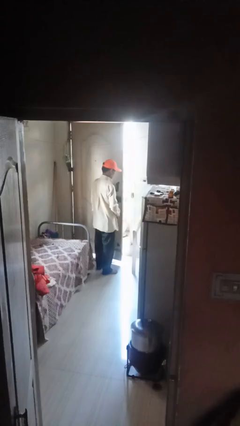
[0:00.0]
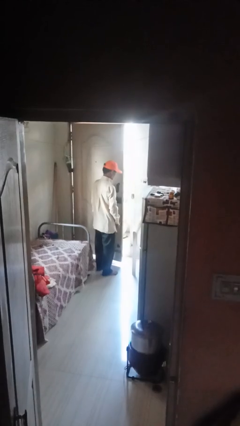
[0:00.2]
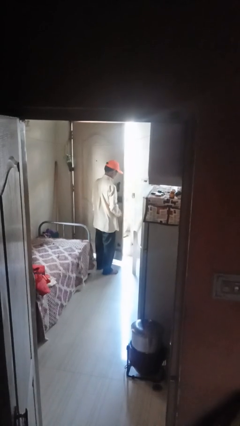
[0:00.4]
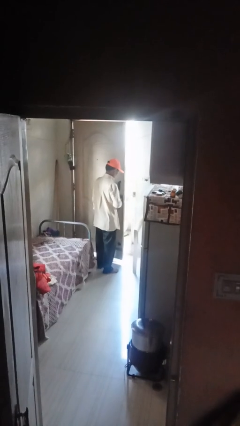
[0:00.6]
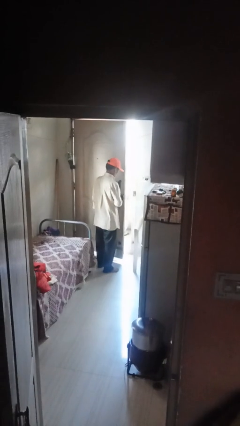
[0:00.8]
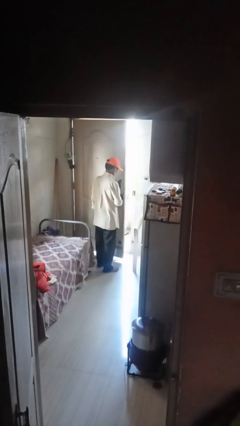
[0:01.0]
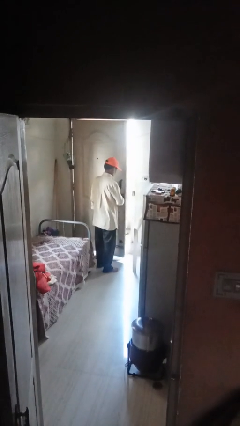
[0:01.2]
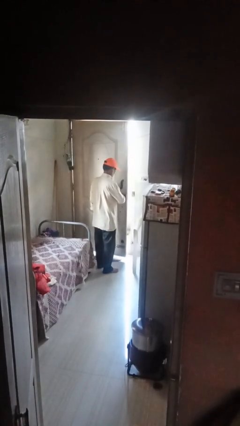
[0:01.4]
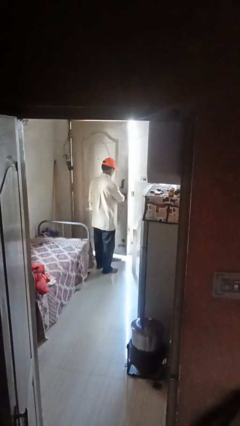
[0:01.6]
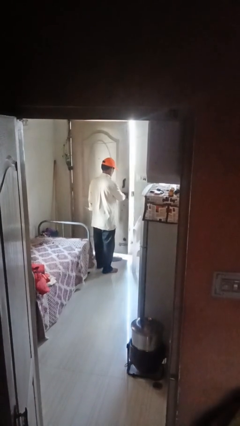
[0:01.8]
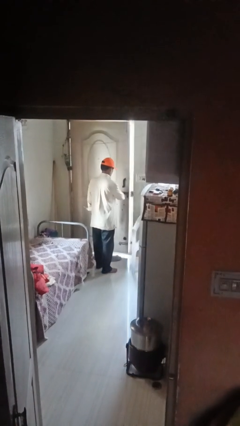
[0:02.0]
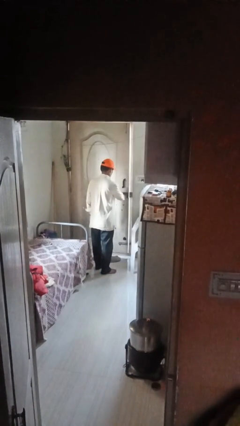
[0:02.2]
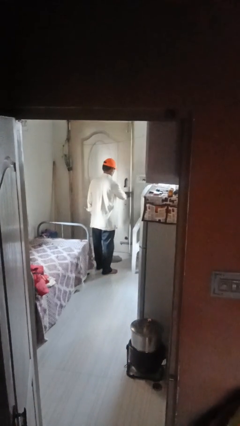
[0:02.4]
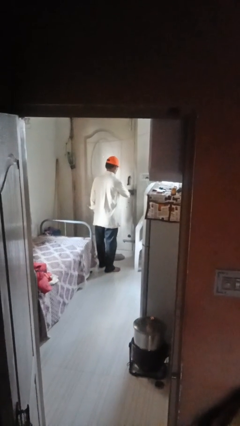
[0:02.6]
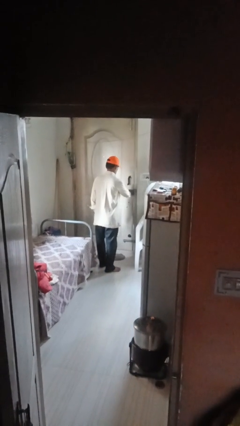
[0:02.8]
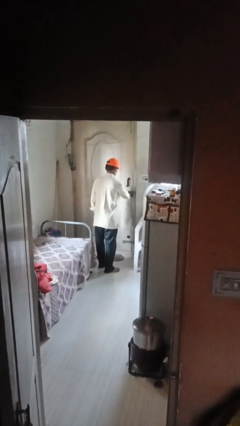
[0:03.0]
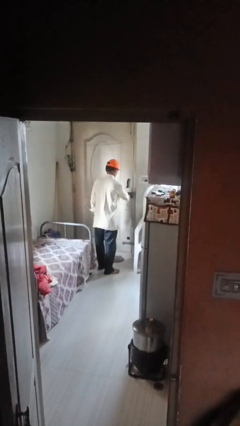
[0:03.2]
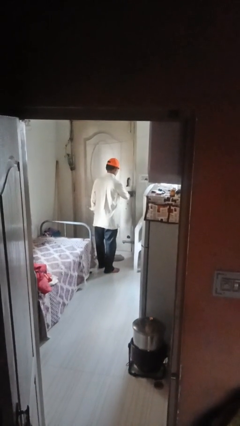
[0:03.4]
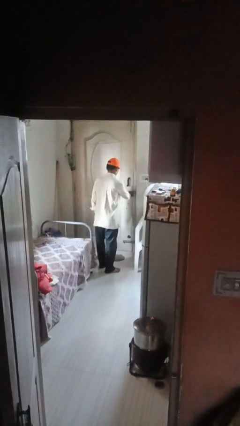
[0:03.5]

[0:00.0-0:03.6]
person closes facility door

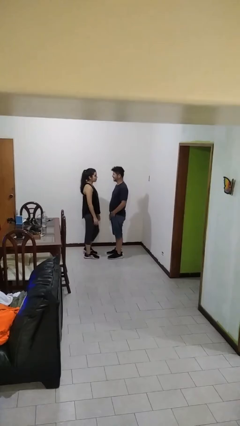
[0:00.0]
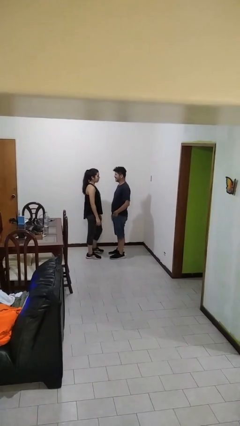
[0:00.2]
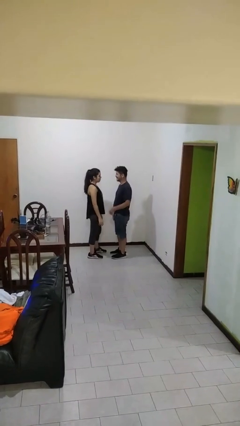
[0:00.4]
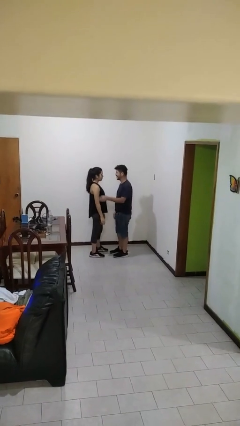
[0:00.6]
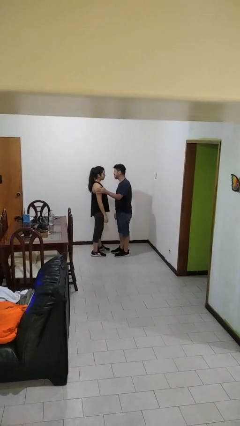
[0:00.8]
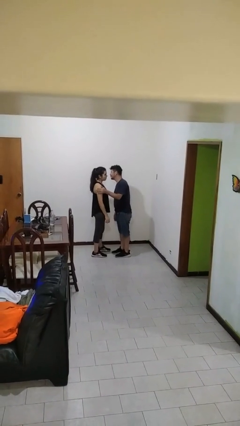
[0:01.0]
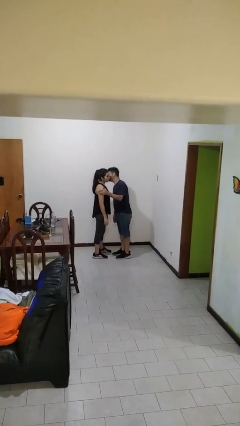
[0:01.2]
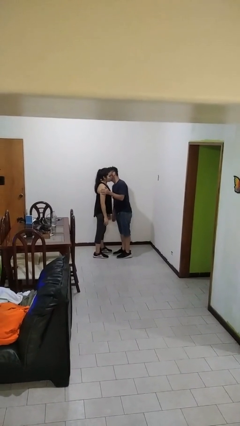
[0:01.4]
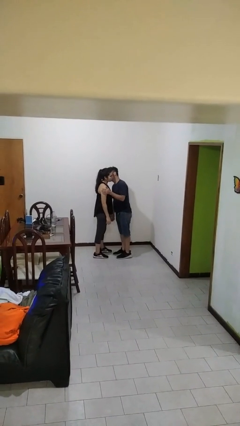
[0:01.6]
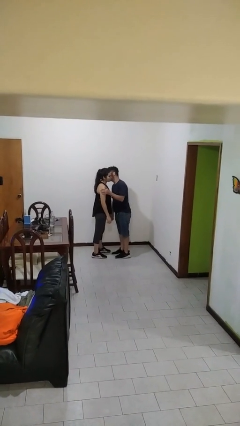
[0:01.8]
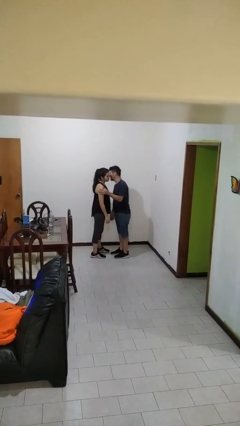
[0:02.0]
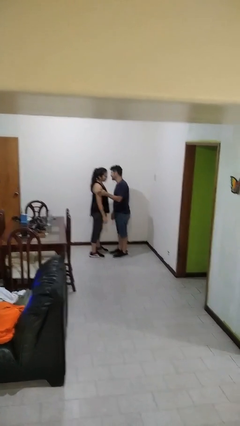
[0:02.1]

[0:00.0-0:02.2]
person kisses cheek of person

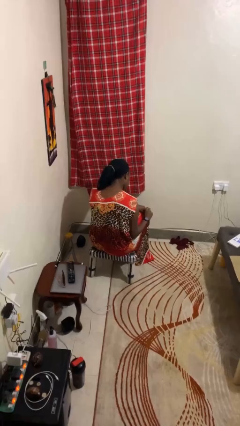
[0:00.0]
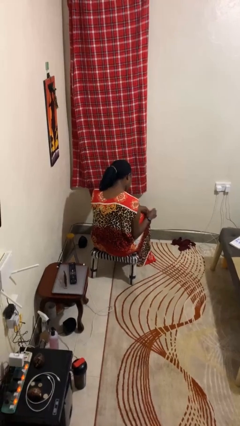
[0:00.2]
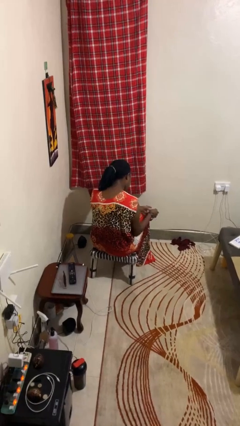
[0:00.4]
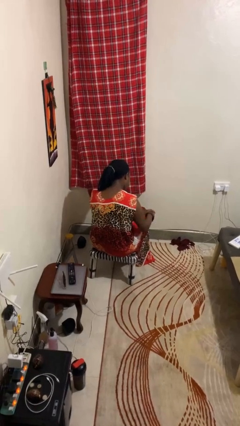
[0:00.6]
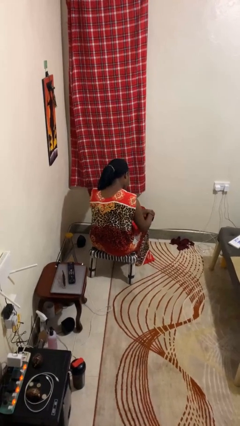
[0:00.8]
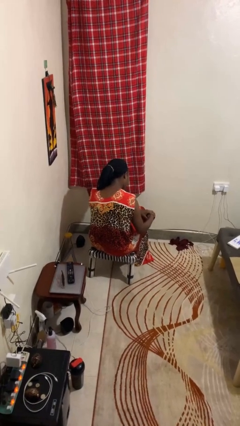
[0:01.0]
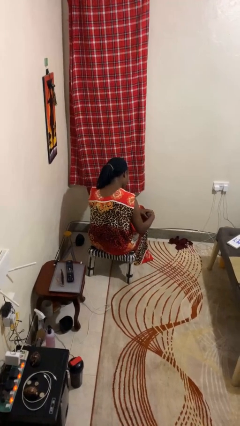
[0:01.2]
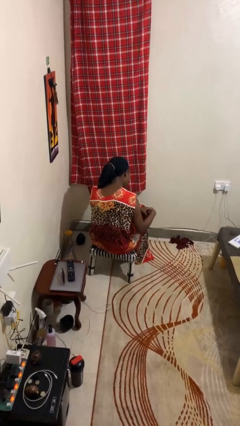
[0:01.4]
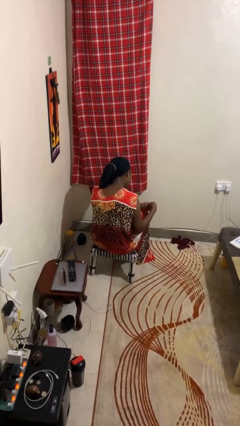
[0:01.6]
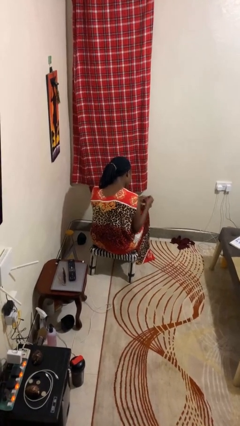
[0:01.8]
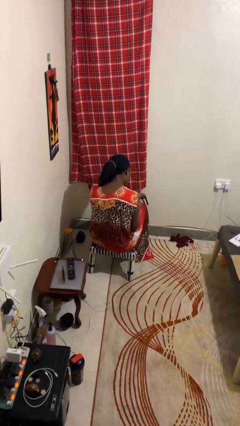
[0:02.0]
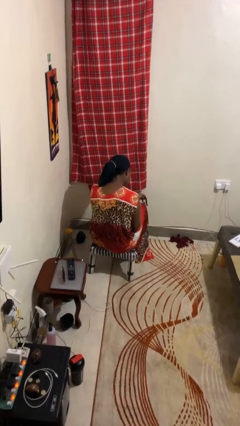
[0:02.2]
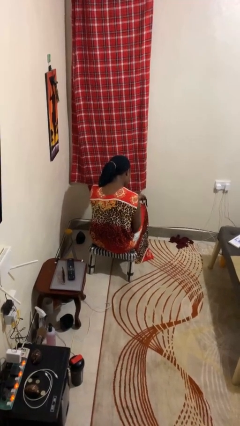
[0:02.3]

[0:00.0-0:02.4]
person takes off wristwatch

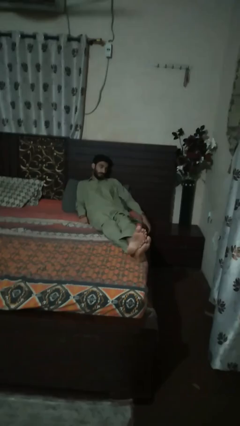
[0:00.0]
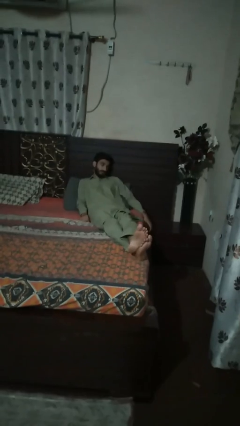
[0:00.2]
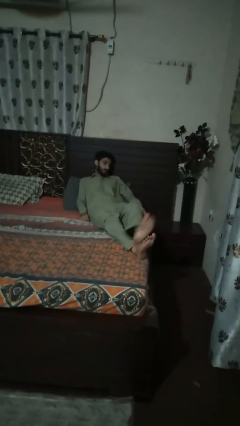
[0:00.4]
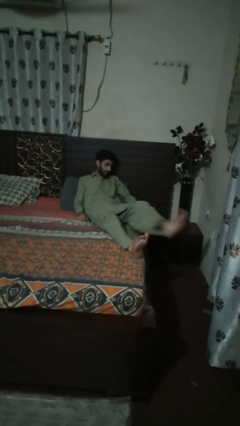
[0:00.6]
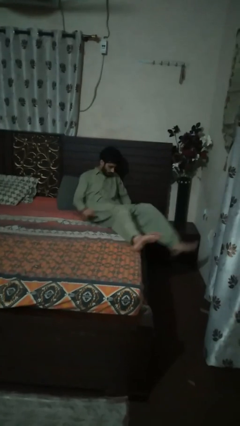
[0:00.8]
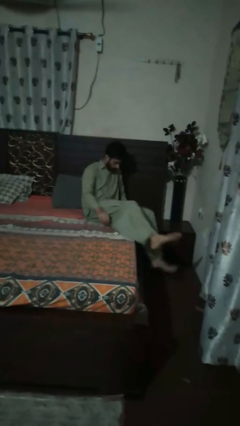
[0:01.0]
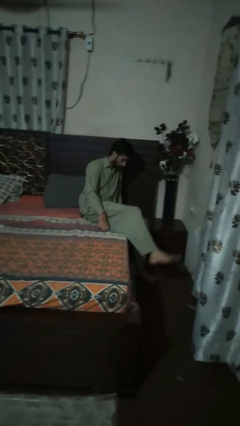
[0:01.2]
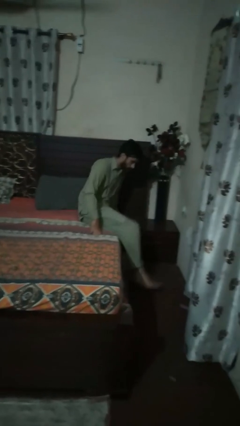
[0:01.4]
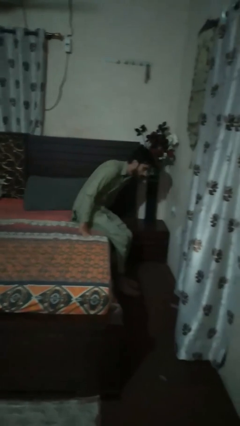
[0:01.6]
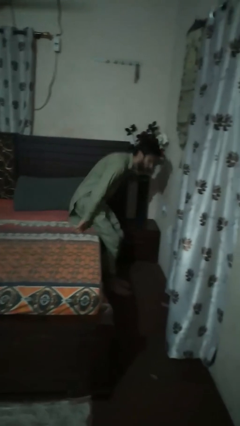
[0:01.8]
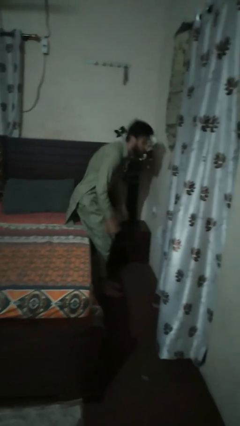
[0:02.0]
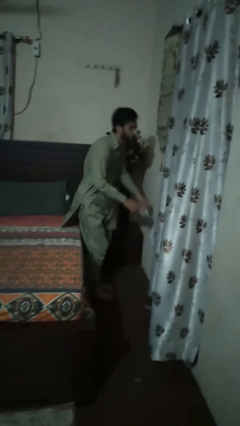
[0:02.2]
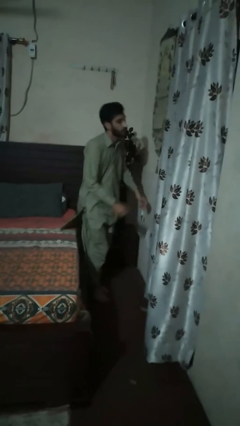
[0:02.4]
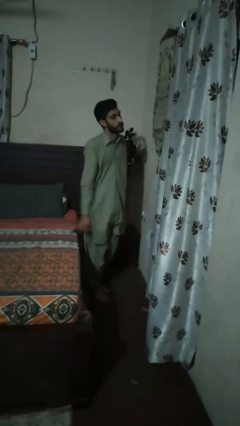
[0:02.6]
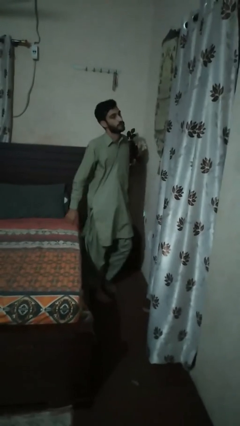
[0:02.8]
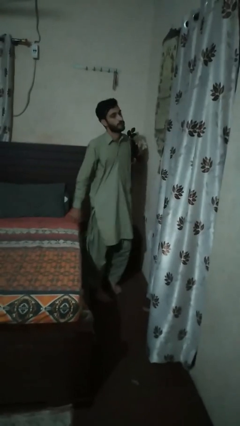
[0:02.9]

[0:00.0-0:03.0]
person stands up

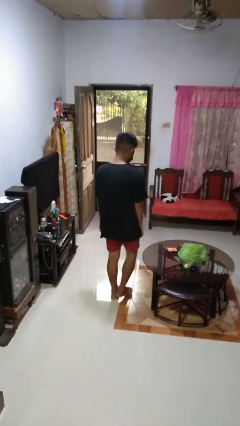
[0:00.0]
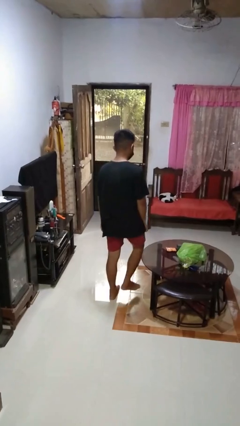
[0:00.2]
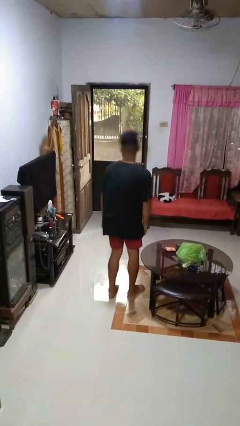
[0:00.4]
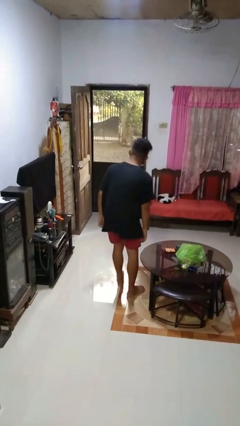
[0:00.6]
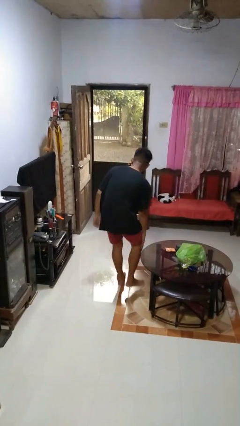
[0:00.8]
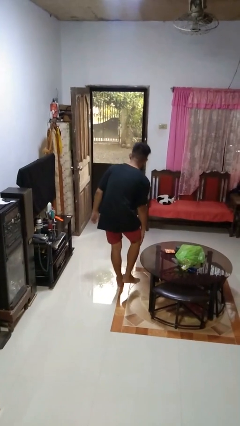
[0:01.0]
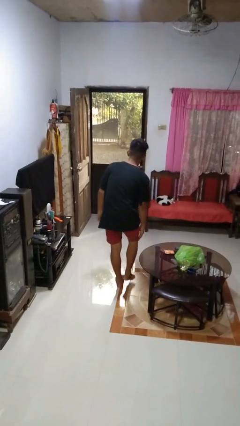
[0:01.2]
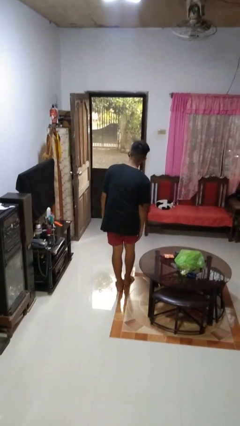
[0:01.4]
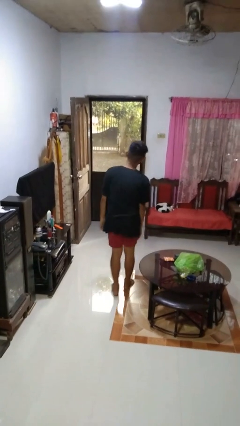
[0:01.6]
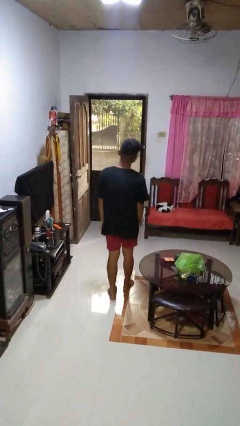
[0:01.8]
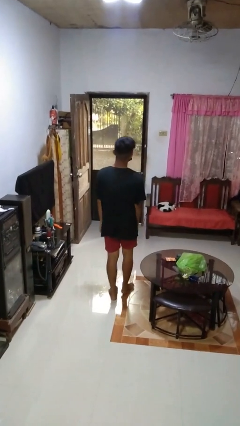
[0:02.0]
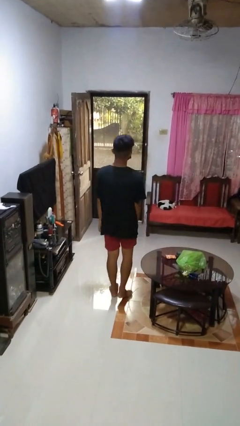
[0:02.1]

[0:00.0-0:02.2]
person bumps into table

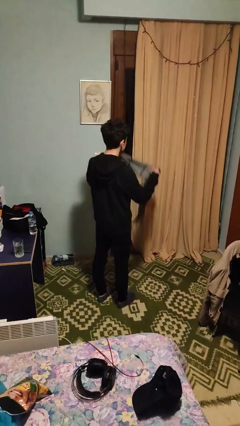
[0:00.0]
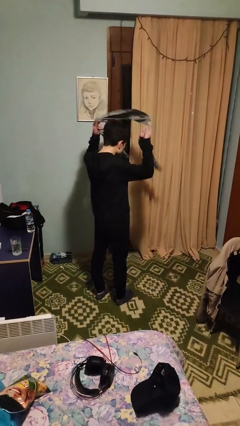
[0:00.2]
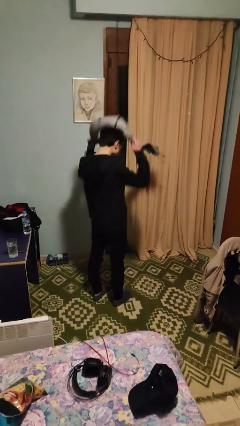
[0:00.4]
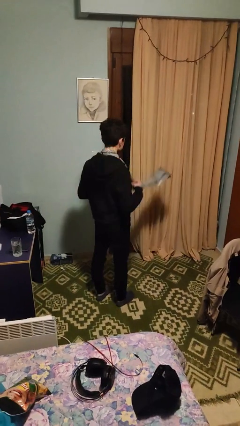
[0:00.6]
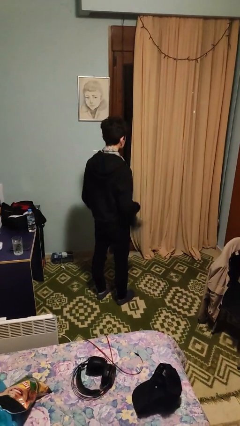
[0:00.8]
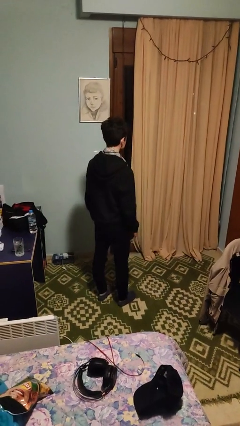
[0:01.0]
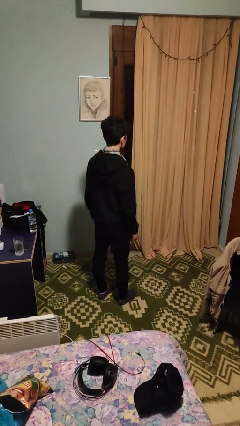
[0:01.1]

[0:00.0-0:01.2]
person puts on scarf

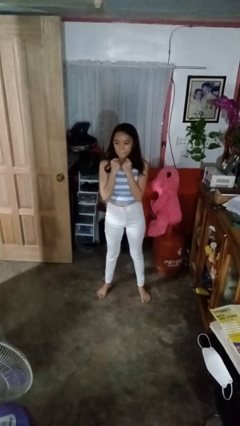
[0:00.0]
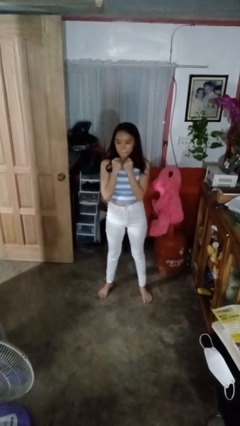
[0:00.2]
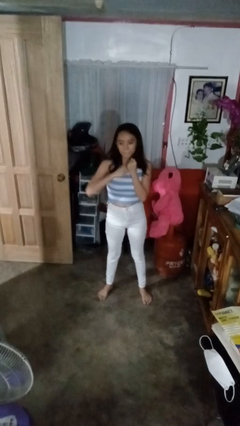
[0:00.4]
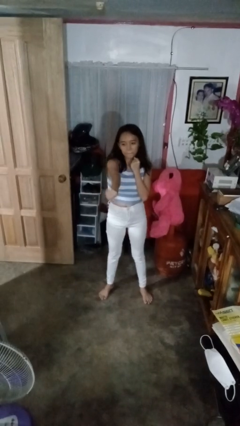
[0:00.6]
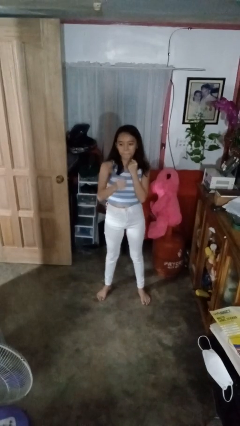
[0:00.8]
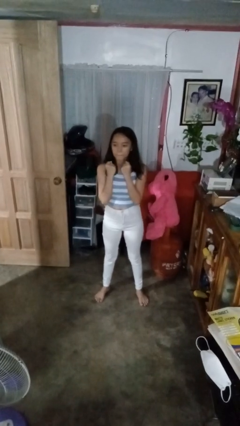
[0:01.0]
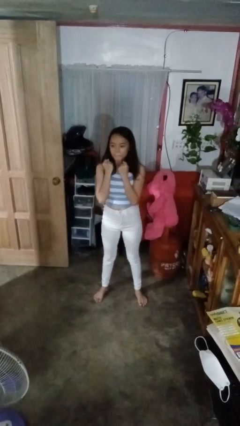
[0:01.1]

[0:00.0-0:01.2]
person punches

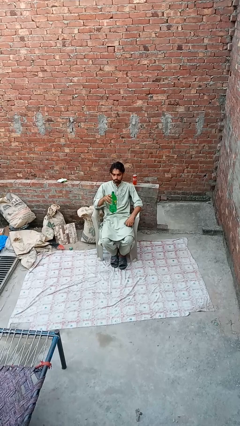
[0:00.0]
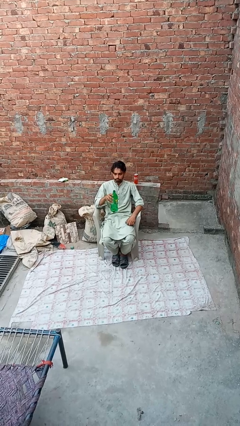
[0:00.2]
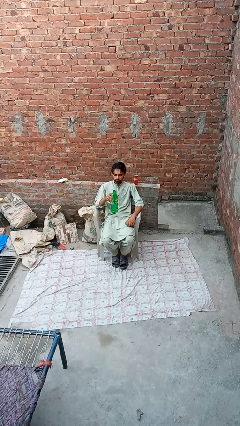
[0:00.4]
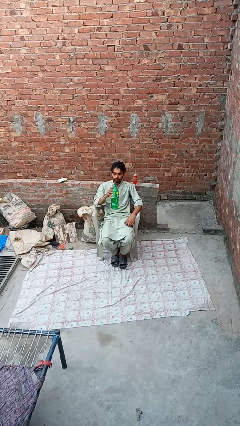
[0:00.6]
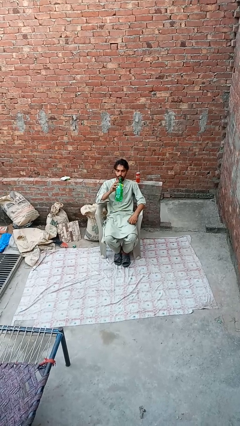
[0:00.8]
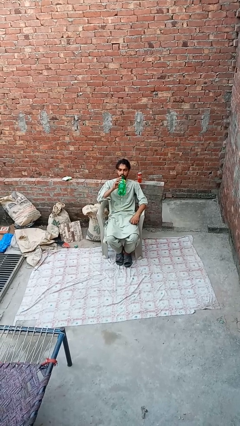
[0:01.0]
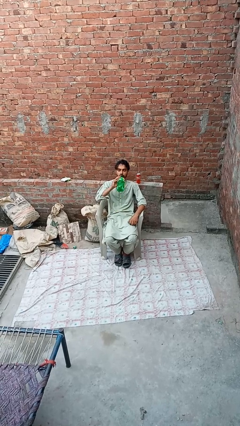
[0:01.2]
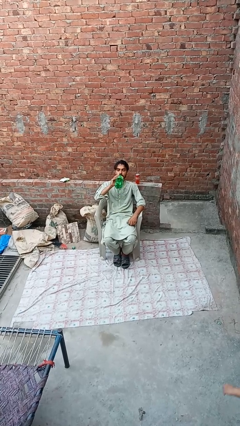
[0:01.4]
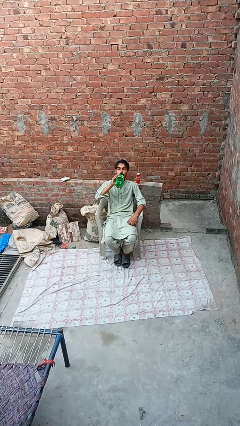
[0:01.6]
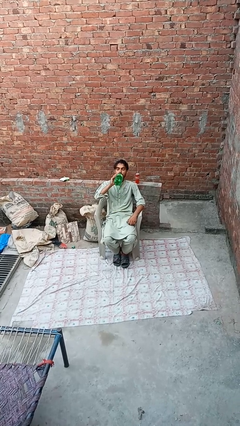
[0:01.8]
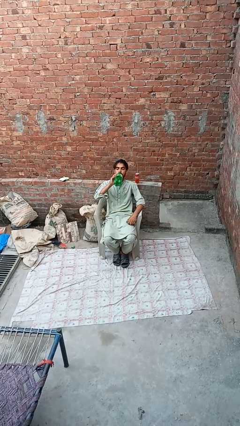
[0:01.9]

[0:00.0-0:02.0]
person drinks from bottle
